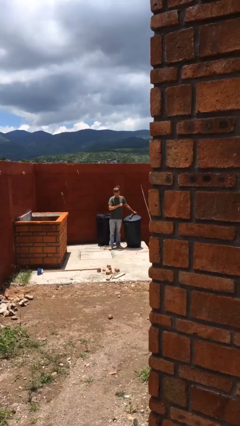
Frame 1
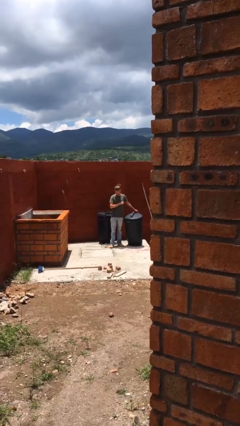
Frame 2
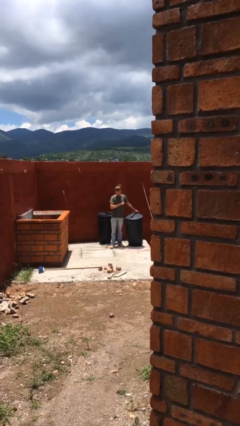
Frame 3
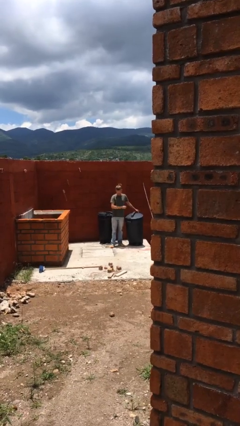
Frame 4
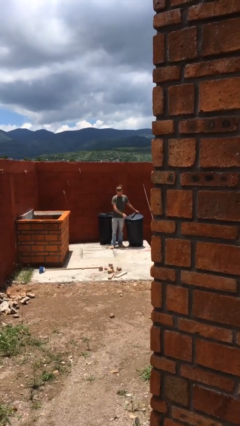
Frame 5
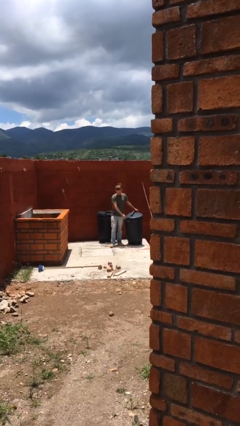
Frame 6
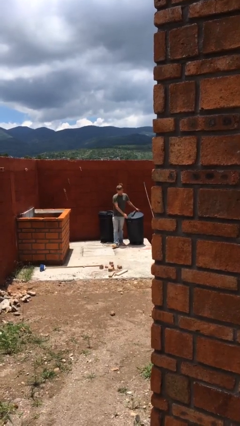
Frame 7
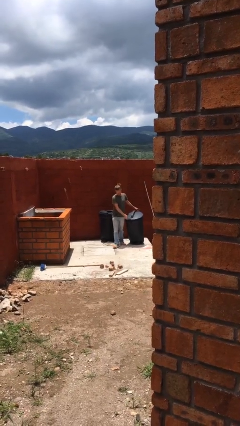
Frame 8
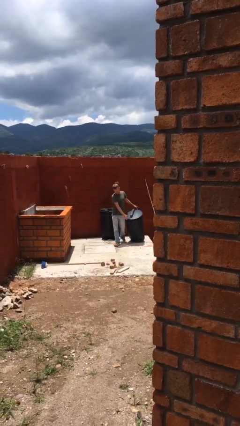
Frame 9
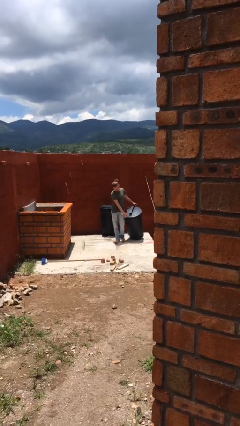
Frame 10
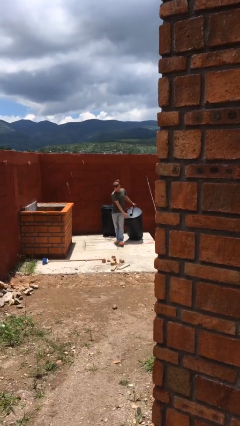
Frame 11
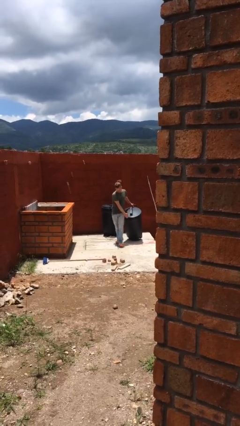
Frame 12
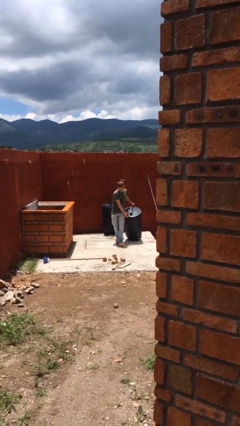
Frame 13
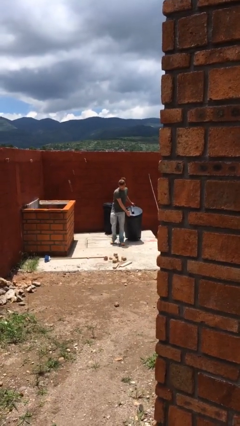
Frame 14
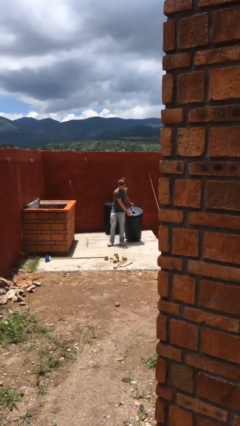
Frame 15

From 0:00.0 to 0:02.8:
person pushes wheeled trashcan

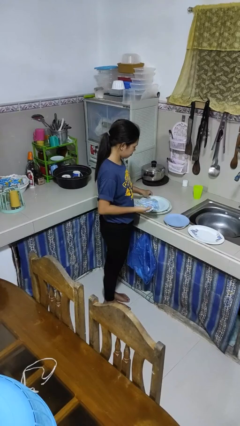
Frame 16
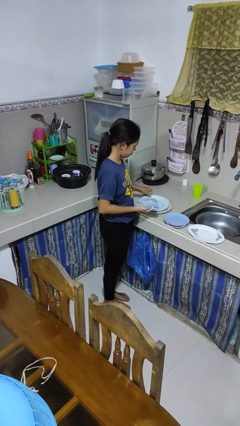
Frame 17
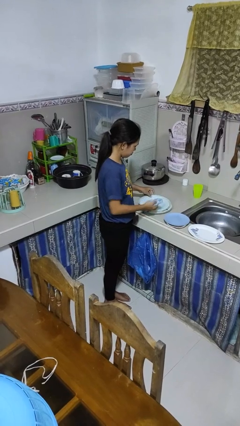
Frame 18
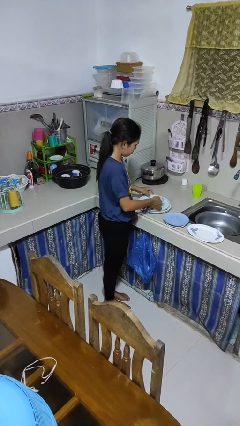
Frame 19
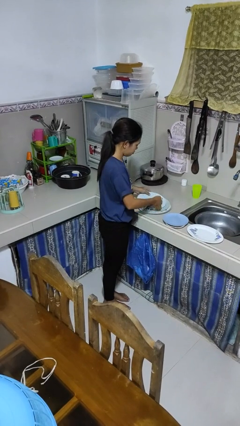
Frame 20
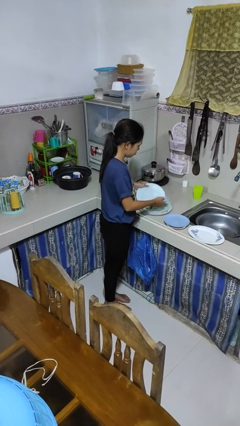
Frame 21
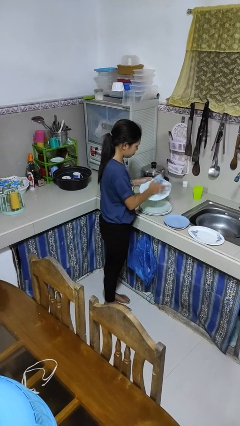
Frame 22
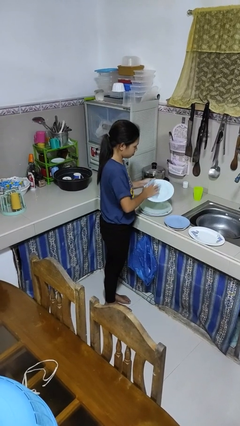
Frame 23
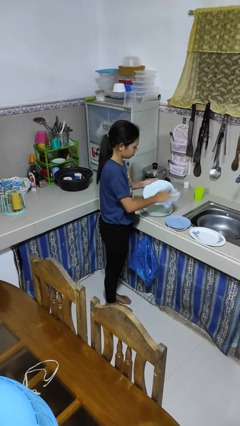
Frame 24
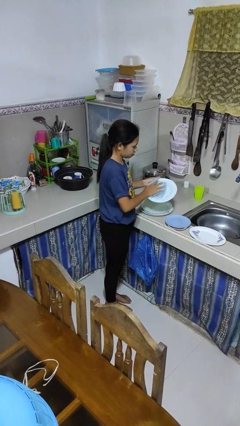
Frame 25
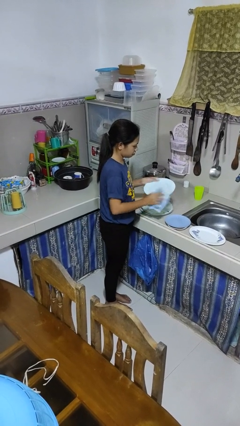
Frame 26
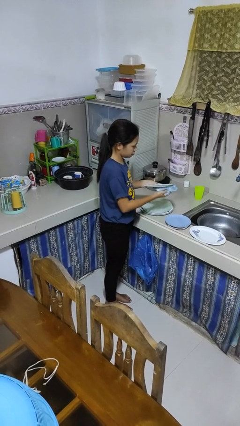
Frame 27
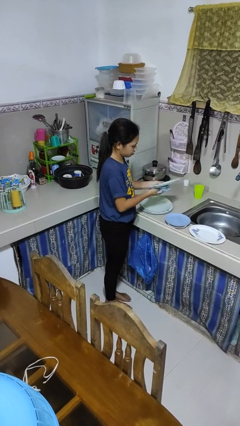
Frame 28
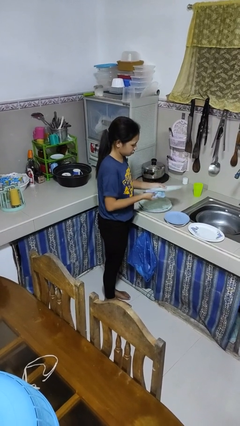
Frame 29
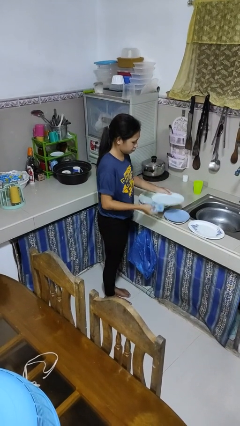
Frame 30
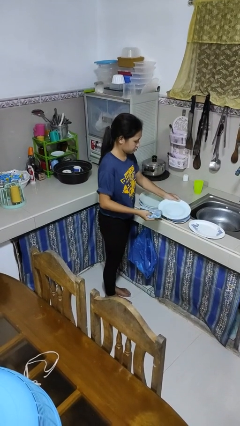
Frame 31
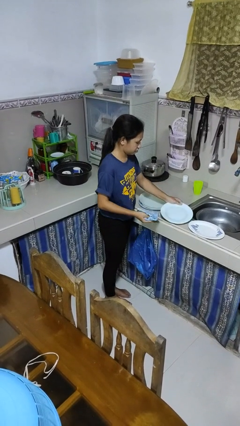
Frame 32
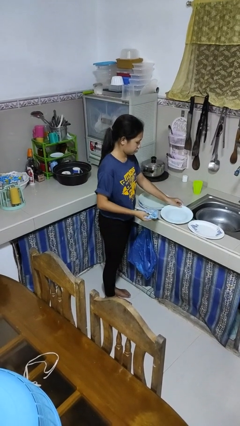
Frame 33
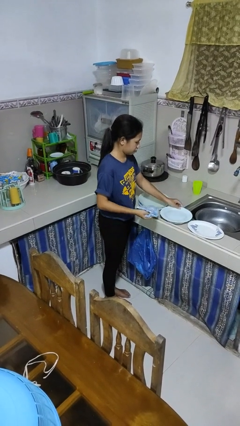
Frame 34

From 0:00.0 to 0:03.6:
person dries dish

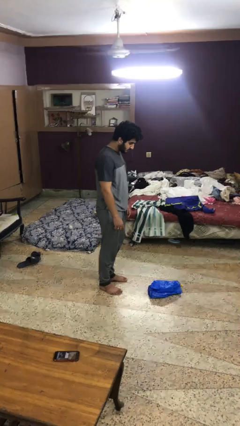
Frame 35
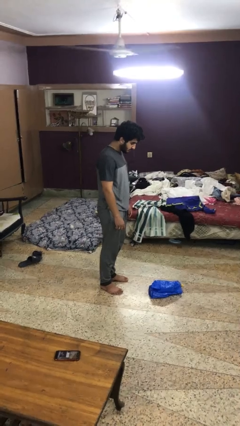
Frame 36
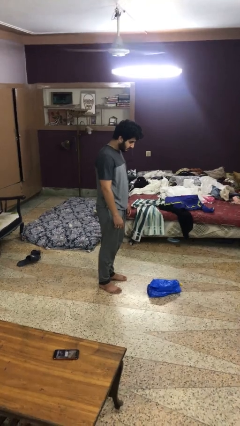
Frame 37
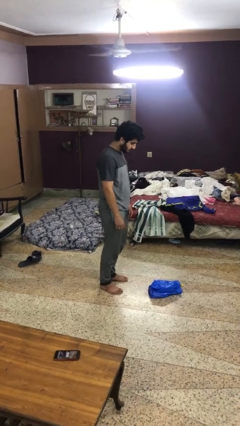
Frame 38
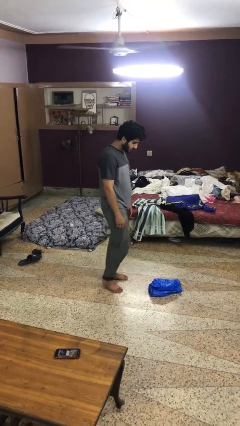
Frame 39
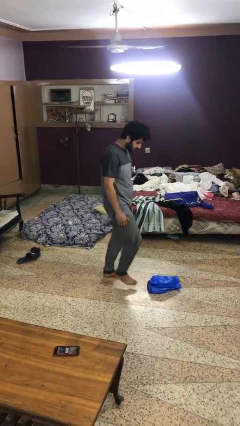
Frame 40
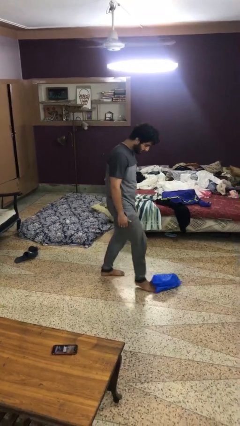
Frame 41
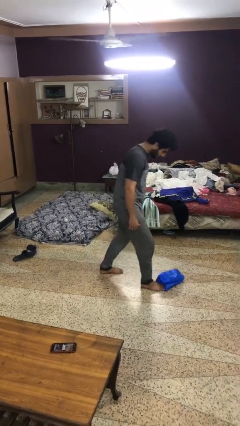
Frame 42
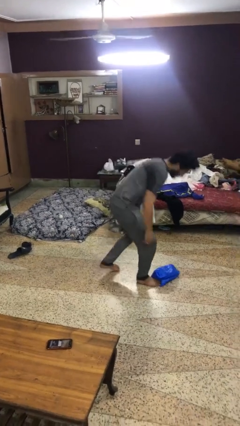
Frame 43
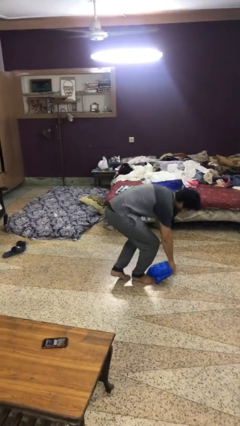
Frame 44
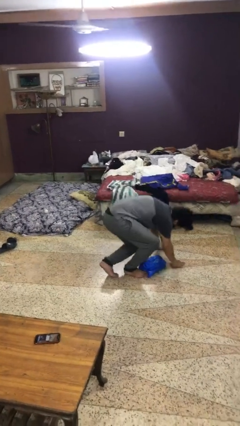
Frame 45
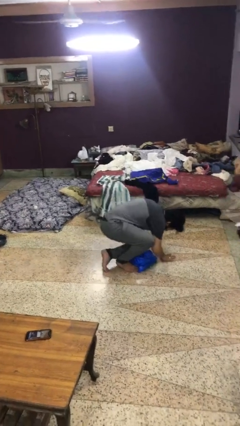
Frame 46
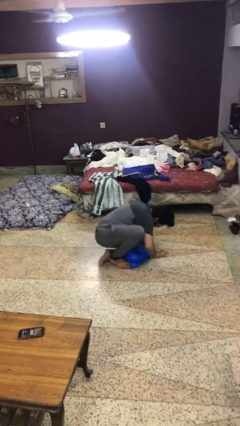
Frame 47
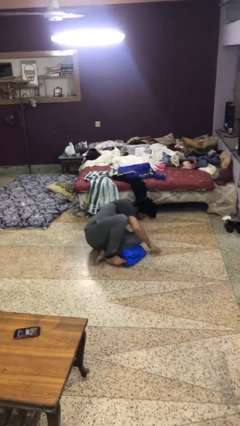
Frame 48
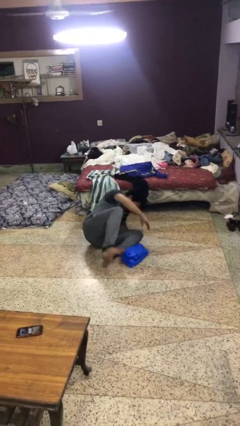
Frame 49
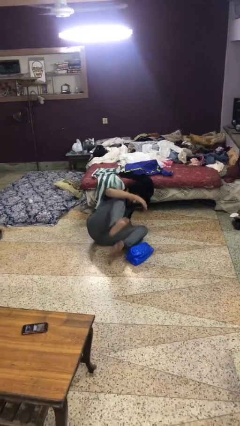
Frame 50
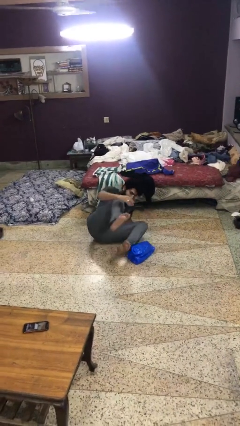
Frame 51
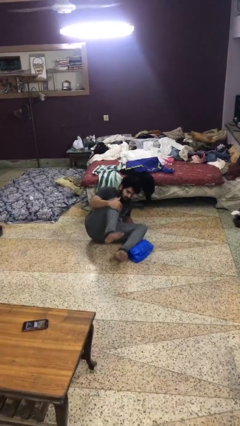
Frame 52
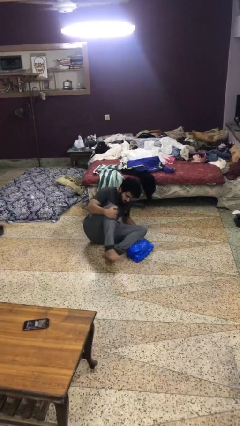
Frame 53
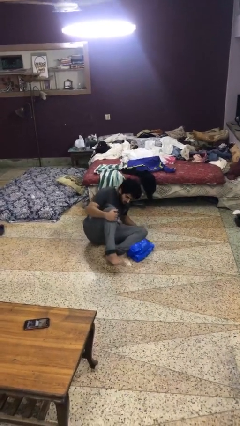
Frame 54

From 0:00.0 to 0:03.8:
person trips on object on floor

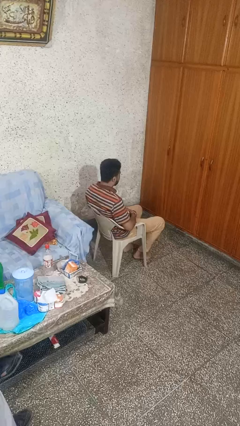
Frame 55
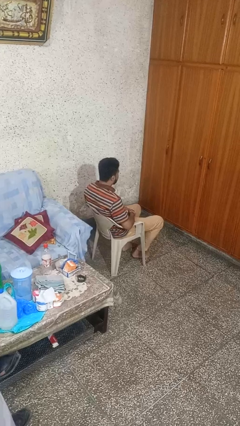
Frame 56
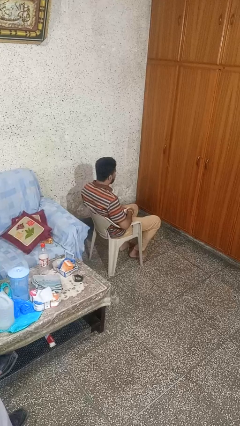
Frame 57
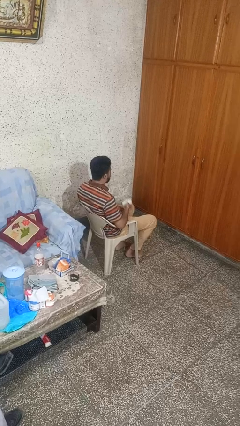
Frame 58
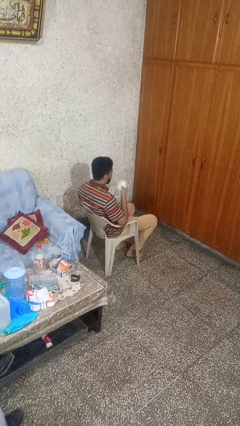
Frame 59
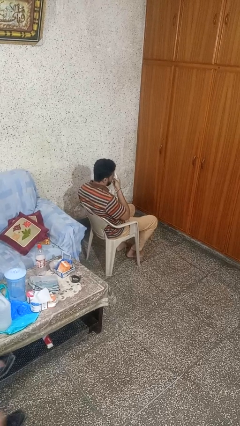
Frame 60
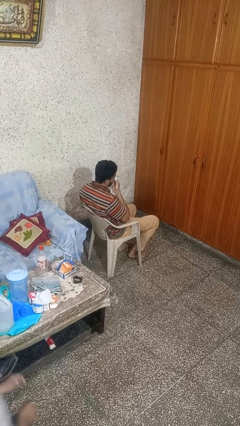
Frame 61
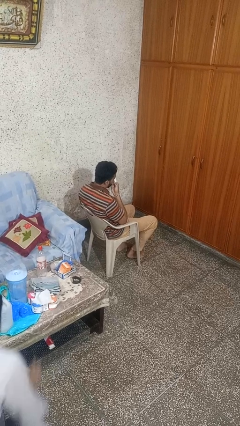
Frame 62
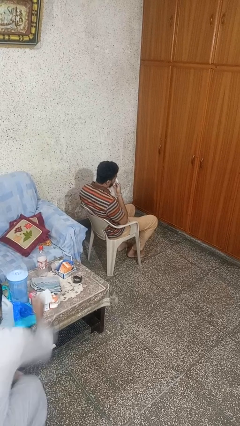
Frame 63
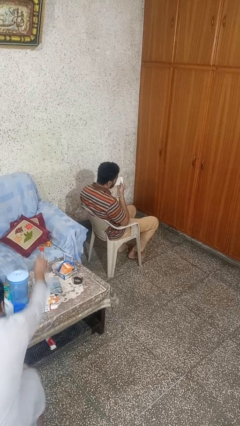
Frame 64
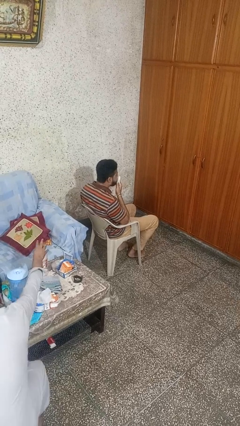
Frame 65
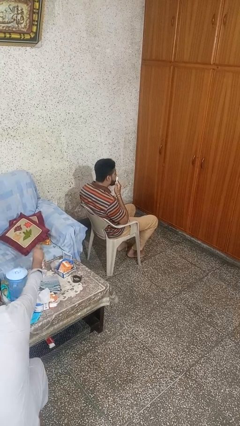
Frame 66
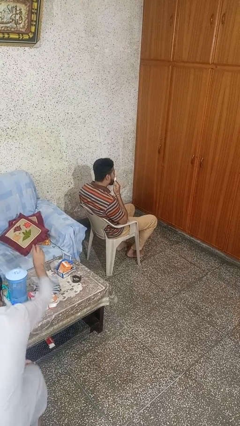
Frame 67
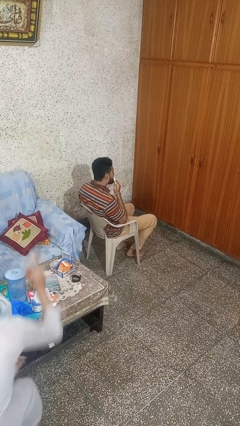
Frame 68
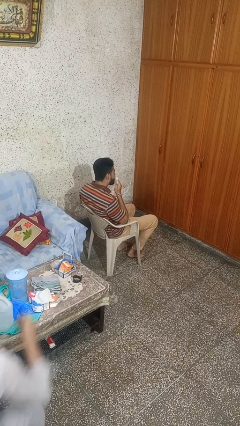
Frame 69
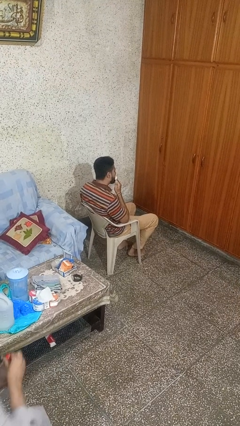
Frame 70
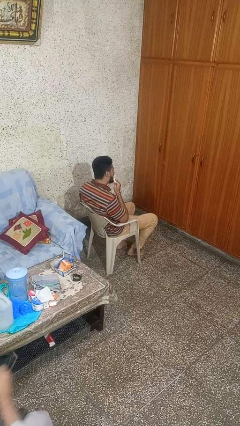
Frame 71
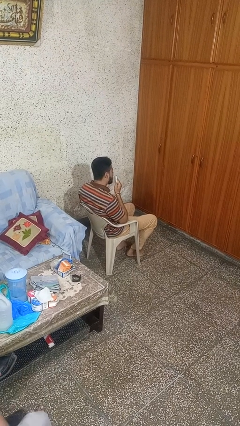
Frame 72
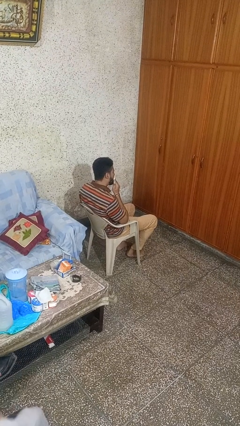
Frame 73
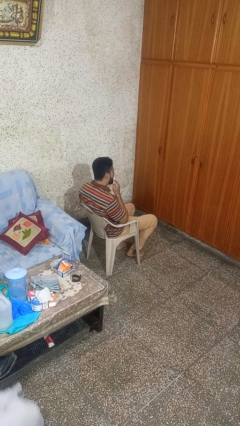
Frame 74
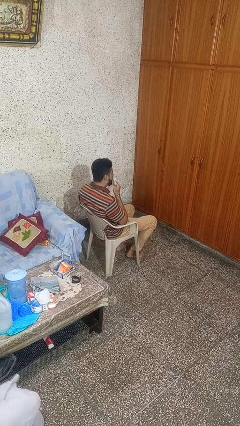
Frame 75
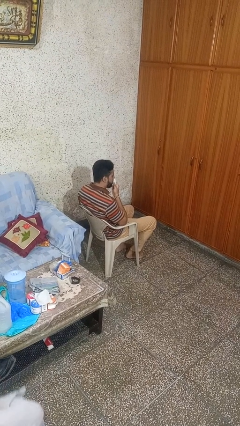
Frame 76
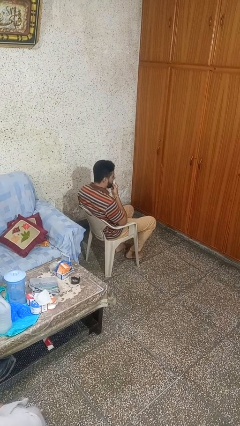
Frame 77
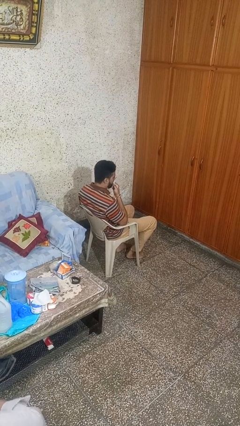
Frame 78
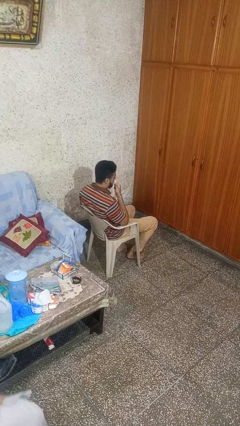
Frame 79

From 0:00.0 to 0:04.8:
person wipes mouth with napkin

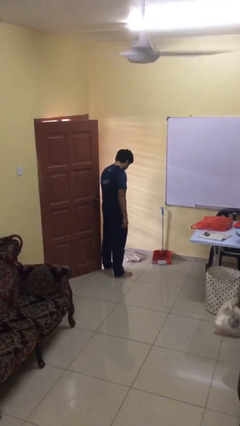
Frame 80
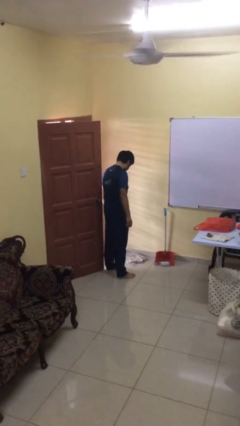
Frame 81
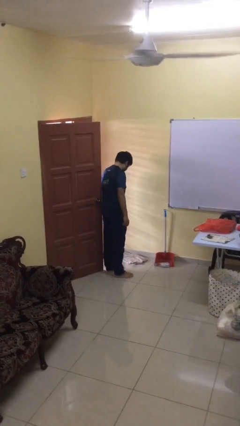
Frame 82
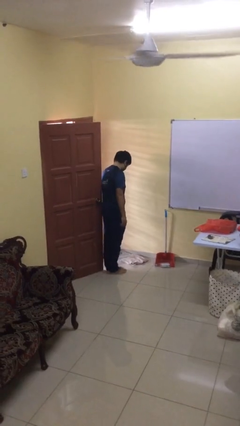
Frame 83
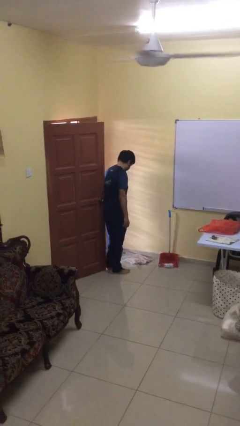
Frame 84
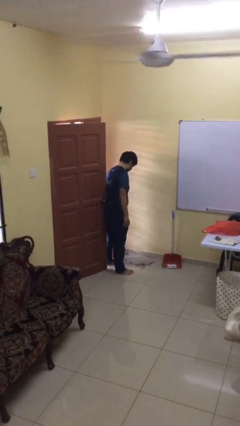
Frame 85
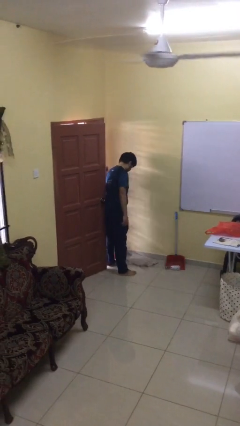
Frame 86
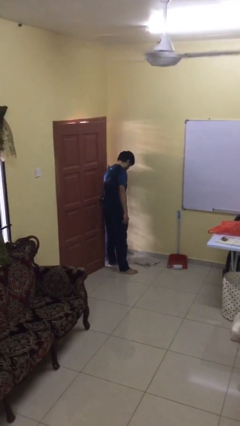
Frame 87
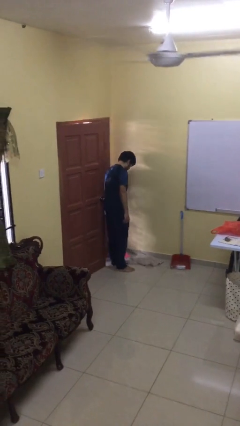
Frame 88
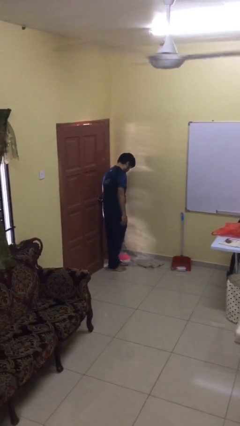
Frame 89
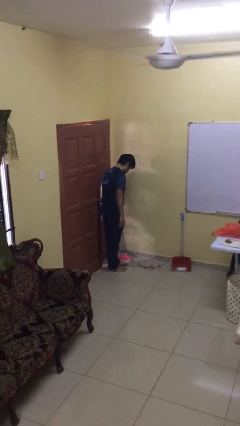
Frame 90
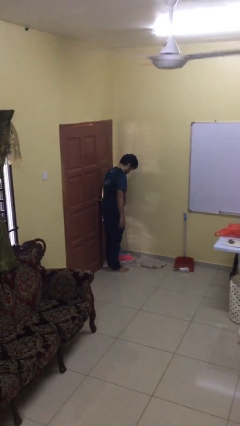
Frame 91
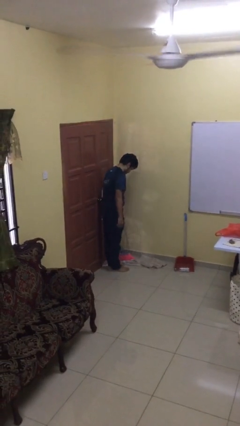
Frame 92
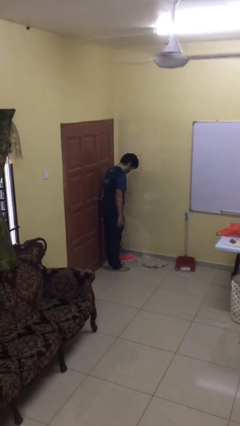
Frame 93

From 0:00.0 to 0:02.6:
person closes door with hip

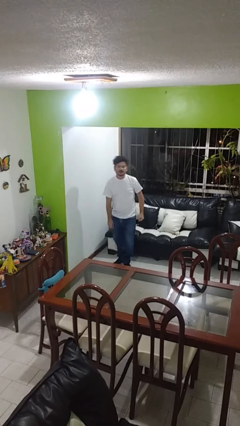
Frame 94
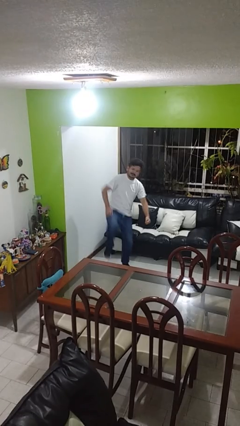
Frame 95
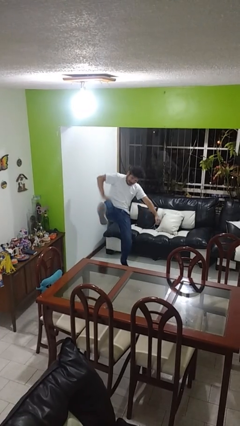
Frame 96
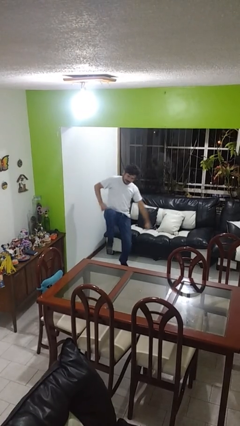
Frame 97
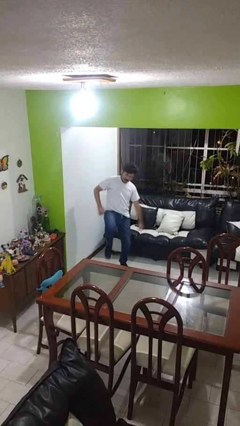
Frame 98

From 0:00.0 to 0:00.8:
person karate kicks
